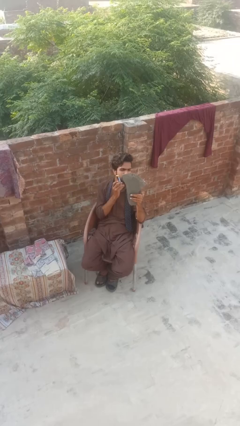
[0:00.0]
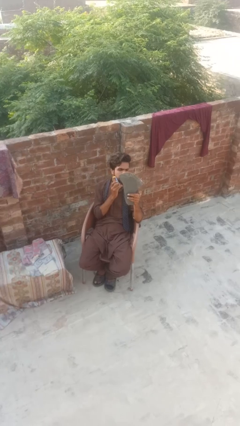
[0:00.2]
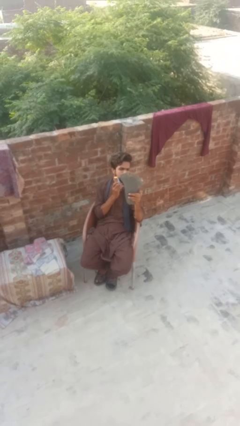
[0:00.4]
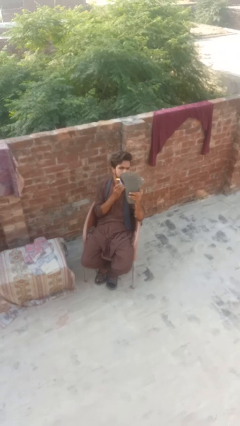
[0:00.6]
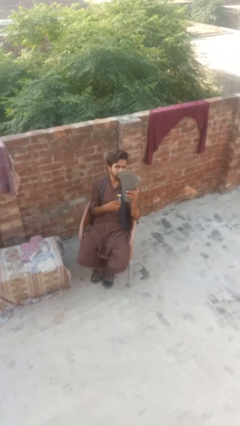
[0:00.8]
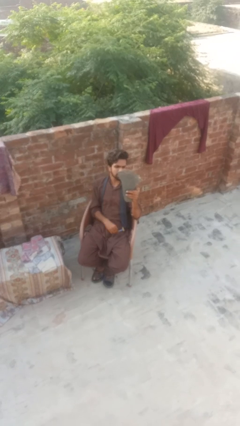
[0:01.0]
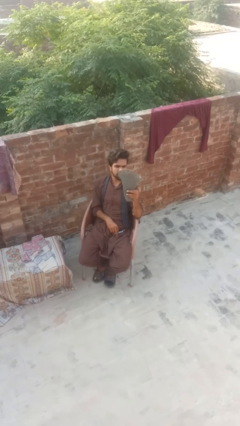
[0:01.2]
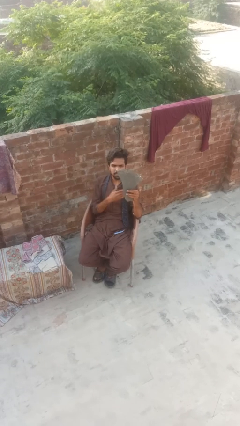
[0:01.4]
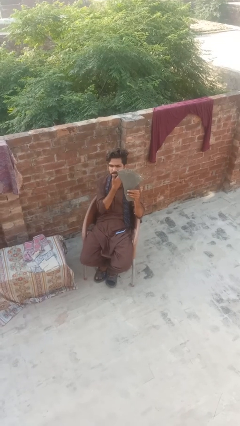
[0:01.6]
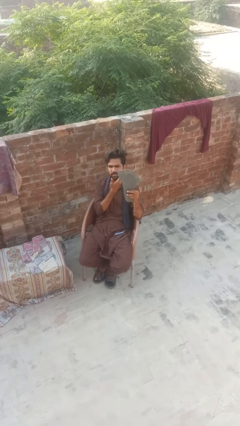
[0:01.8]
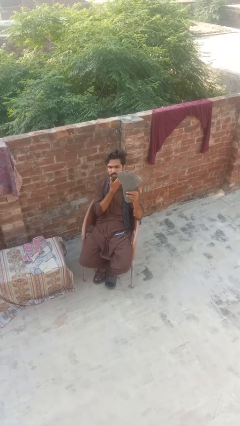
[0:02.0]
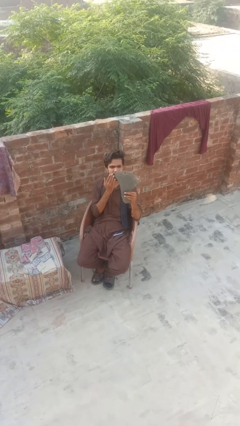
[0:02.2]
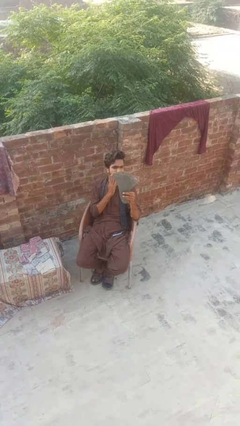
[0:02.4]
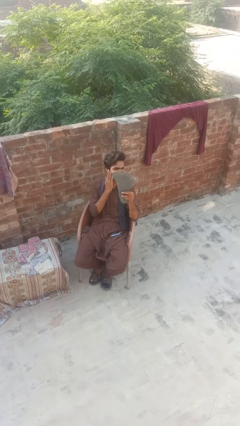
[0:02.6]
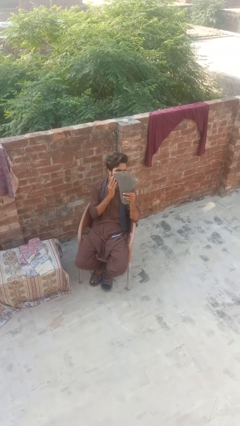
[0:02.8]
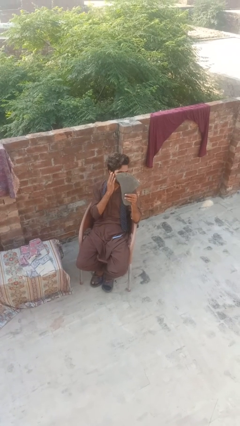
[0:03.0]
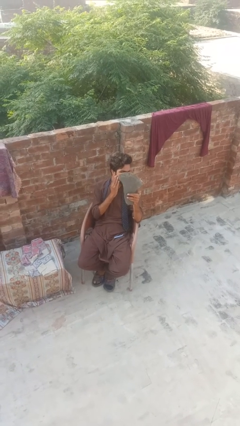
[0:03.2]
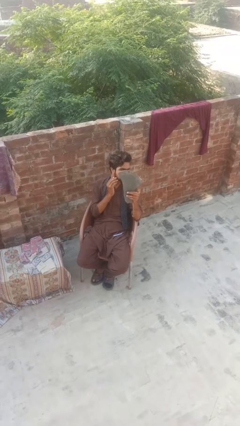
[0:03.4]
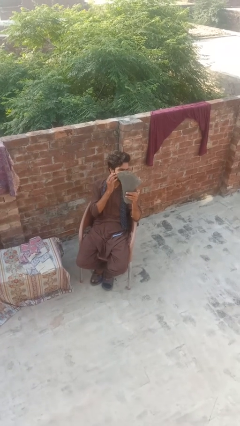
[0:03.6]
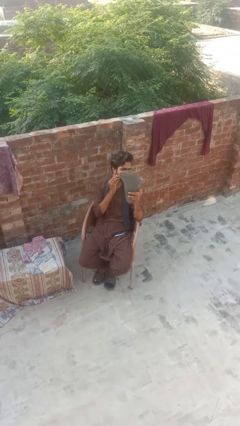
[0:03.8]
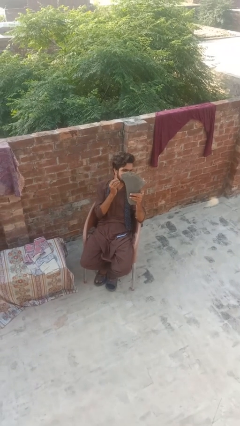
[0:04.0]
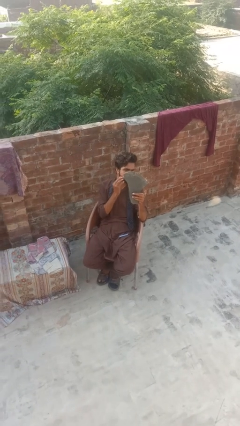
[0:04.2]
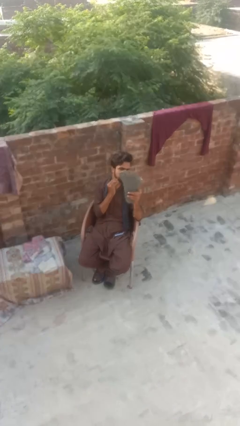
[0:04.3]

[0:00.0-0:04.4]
person applies shaving cream

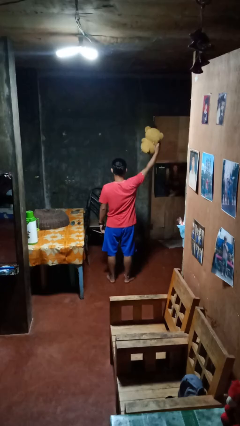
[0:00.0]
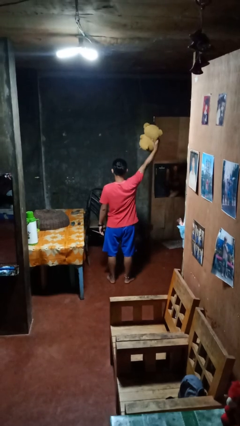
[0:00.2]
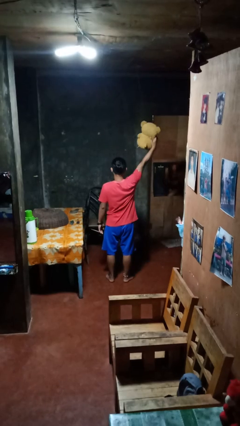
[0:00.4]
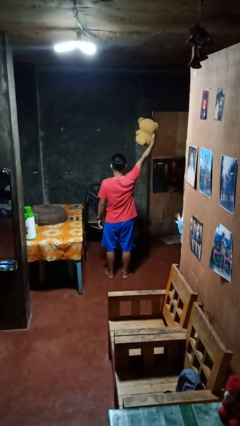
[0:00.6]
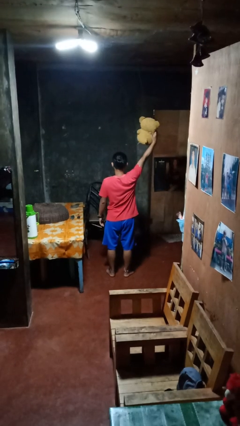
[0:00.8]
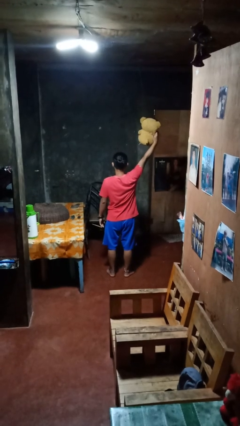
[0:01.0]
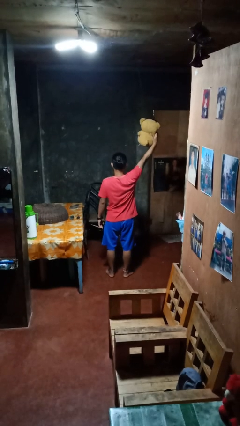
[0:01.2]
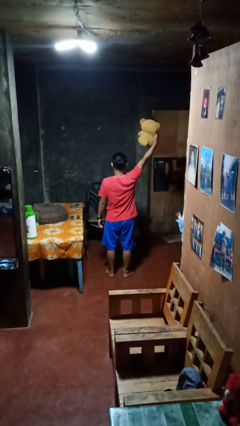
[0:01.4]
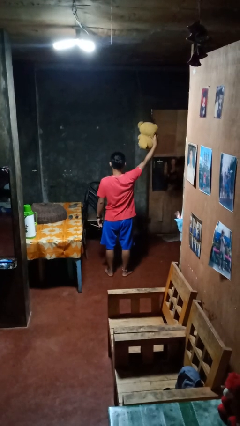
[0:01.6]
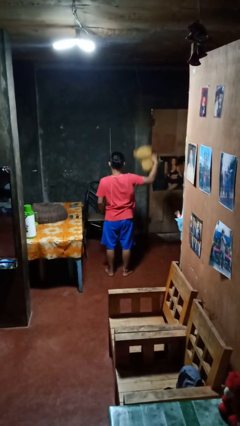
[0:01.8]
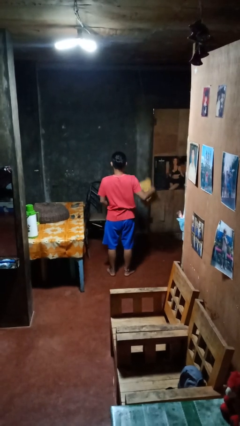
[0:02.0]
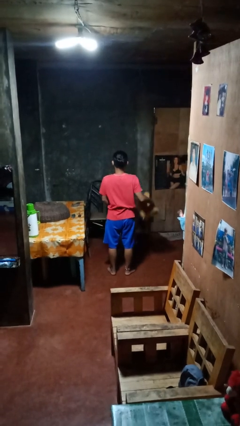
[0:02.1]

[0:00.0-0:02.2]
person holds object above head

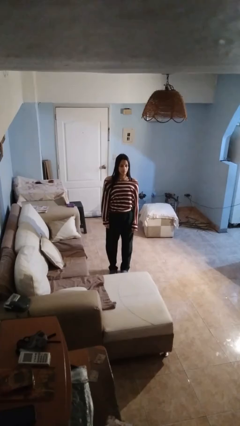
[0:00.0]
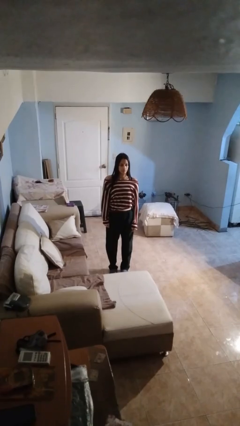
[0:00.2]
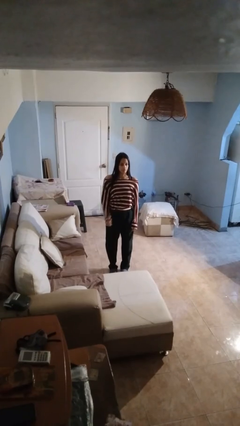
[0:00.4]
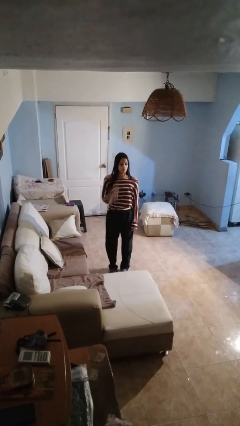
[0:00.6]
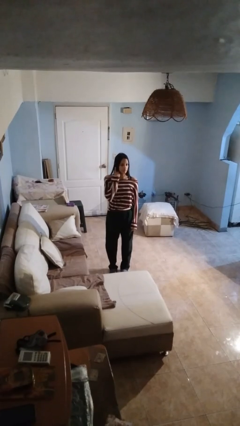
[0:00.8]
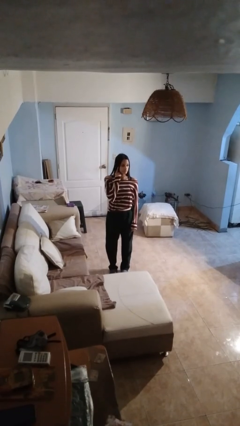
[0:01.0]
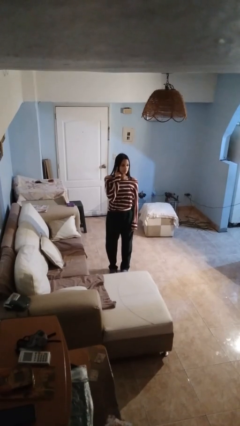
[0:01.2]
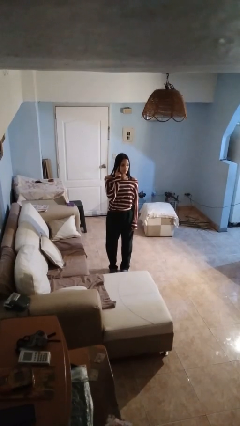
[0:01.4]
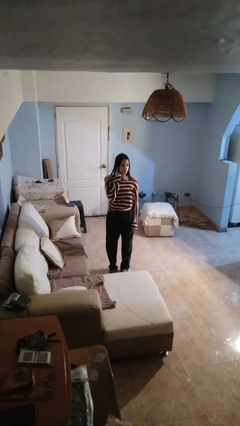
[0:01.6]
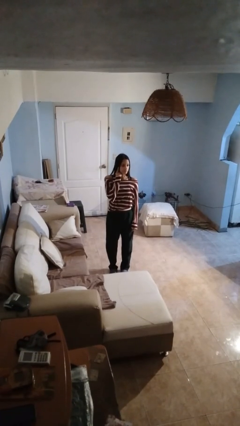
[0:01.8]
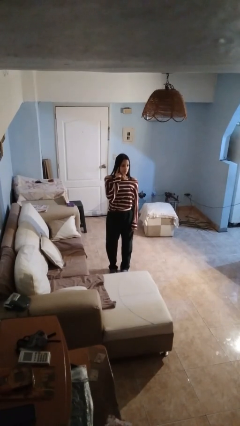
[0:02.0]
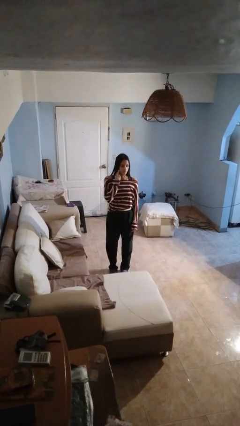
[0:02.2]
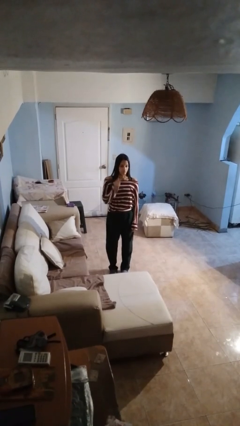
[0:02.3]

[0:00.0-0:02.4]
person gestures listen closely

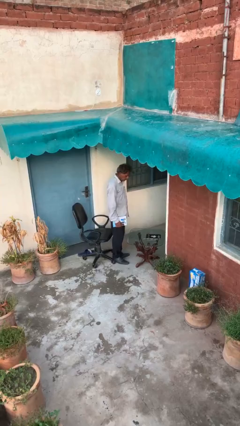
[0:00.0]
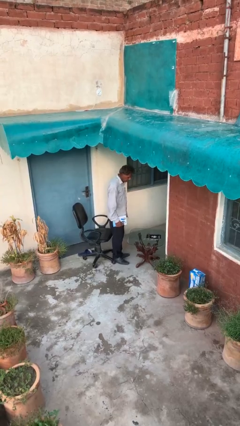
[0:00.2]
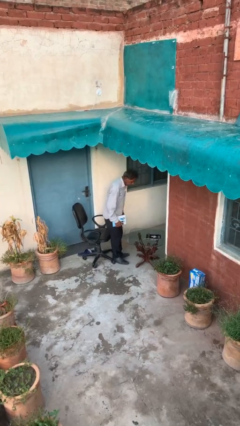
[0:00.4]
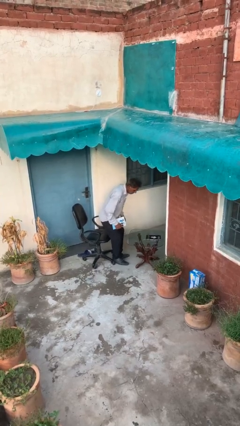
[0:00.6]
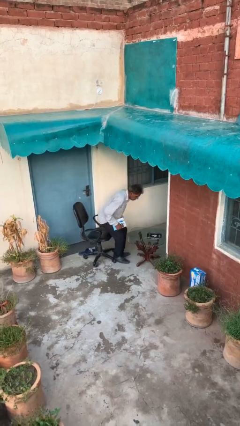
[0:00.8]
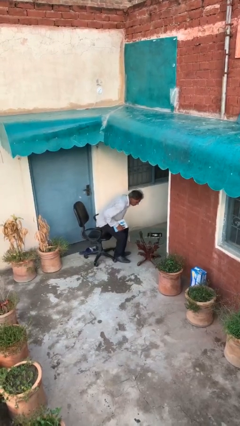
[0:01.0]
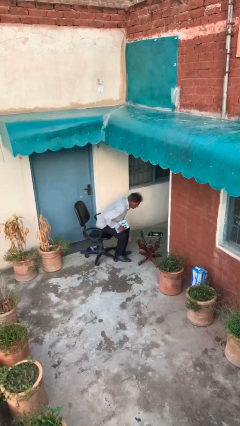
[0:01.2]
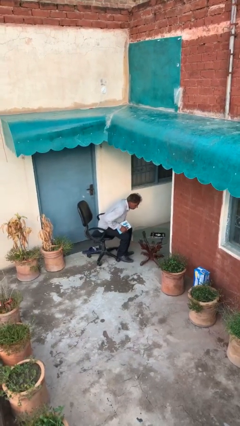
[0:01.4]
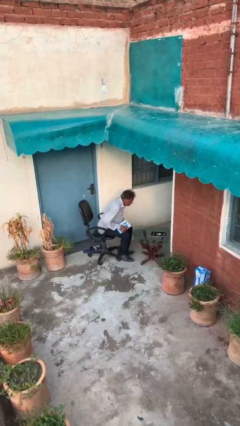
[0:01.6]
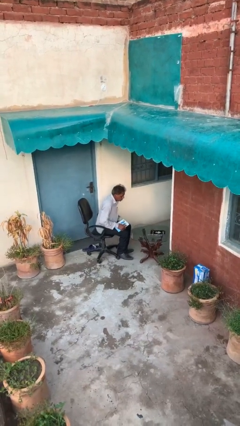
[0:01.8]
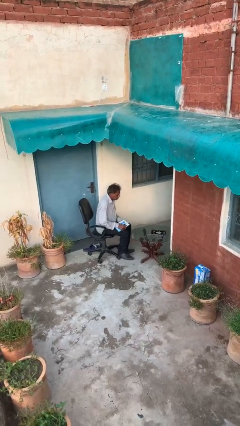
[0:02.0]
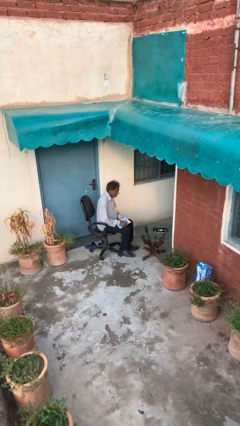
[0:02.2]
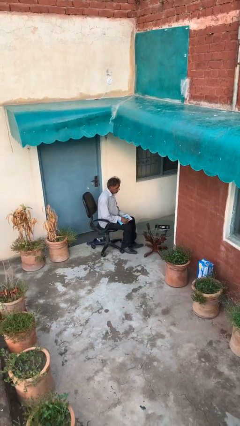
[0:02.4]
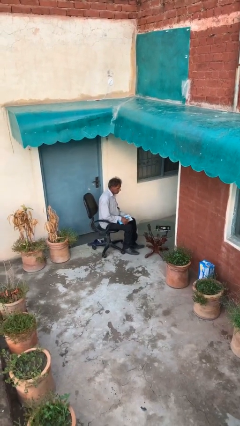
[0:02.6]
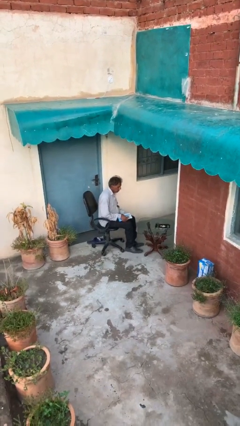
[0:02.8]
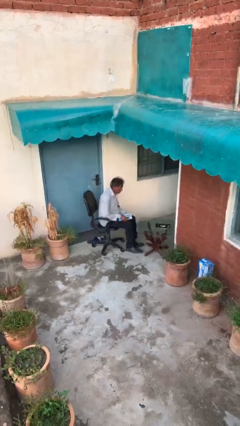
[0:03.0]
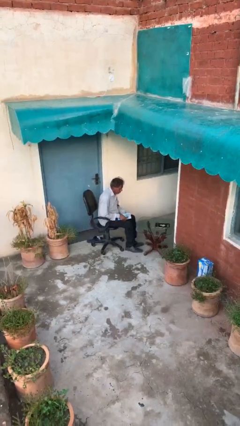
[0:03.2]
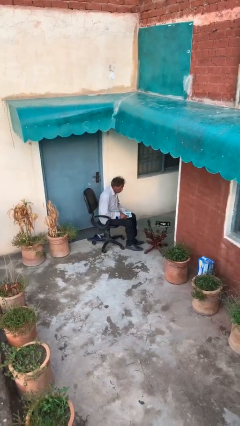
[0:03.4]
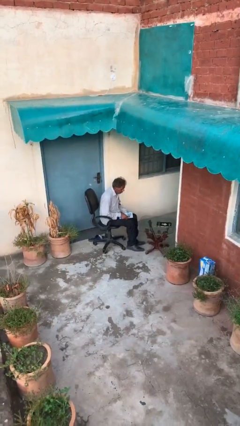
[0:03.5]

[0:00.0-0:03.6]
person sits down

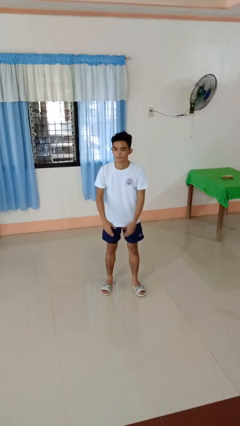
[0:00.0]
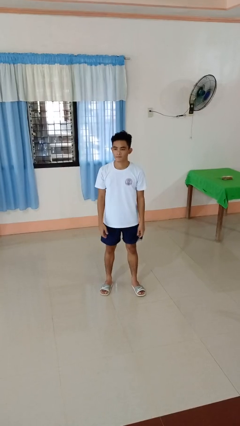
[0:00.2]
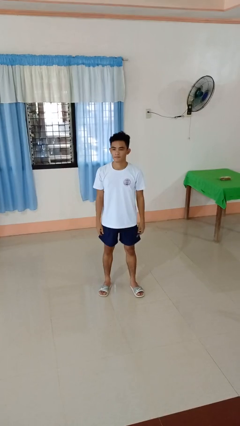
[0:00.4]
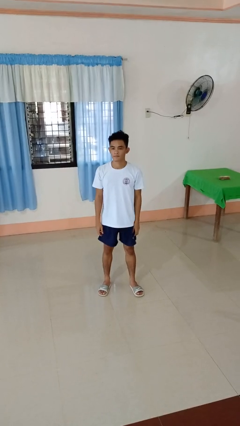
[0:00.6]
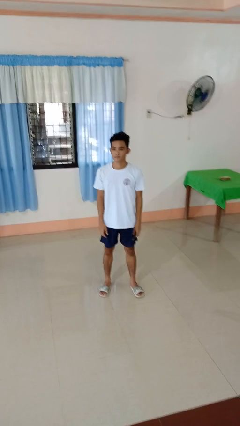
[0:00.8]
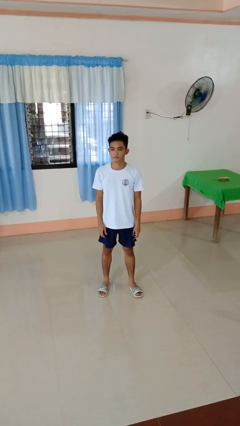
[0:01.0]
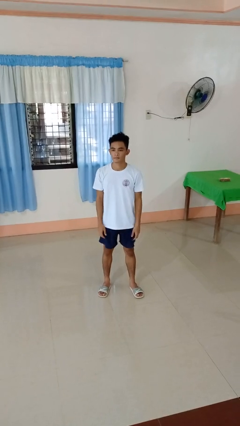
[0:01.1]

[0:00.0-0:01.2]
person stands up

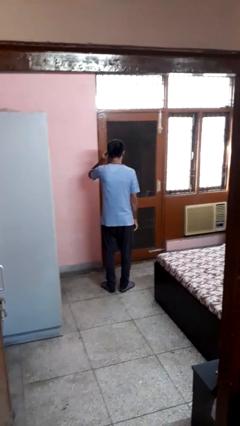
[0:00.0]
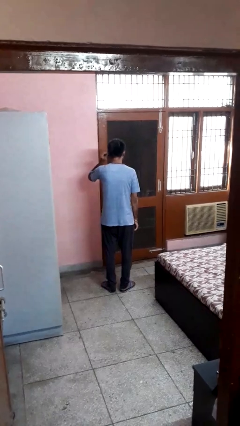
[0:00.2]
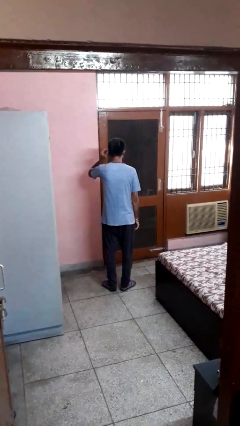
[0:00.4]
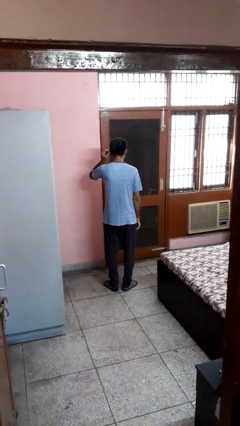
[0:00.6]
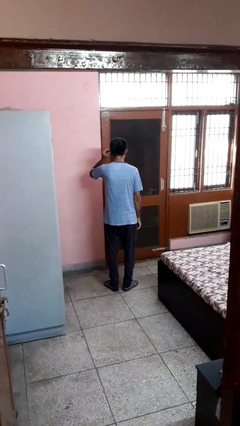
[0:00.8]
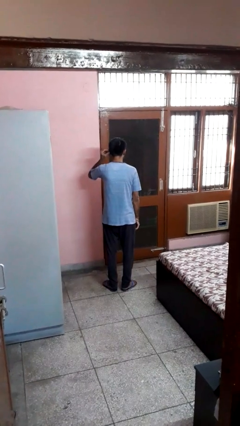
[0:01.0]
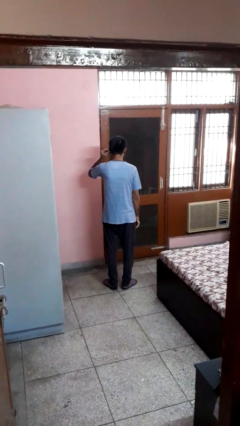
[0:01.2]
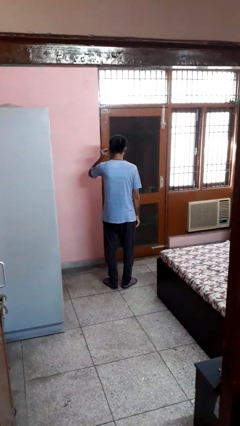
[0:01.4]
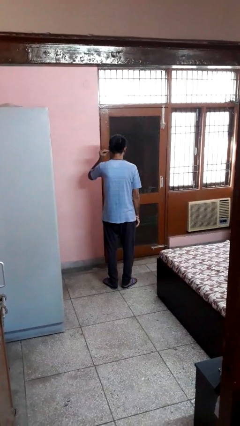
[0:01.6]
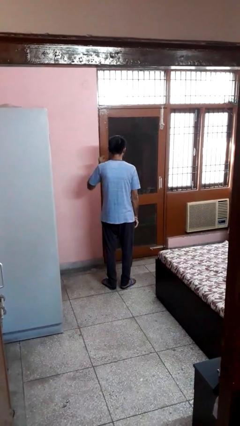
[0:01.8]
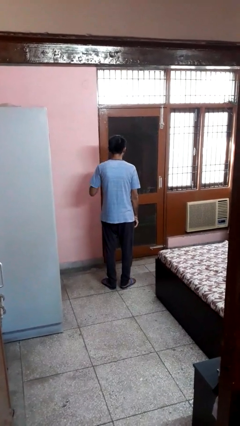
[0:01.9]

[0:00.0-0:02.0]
person touches earlobe

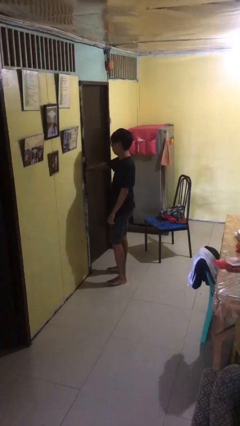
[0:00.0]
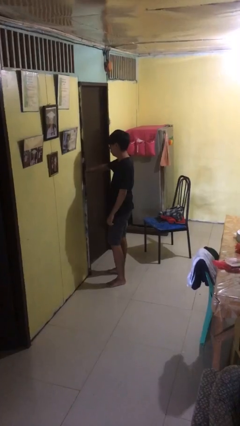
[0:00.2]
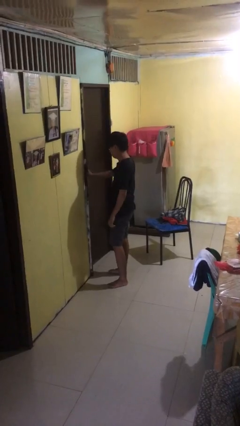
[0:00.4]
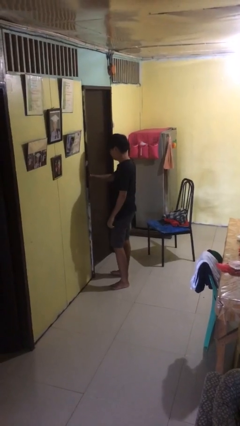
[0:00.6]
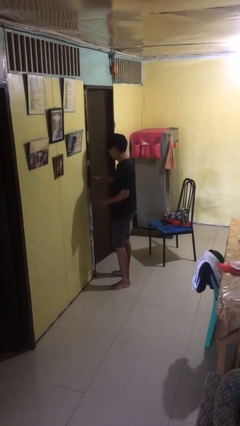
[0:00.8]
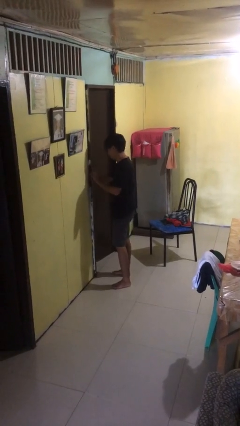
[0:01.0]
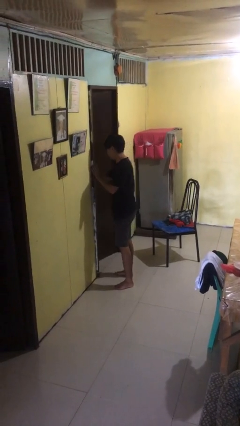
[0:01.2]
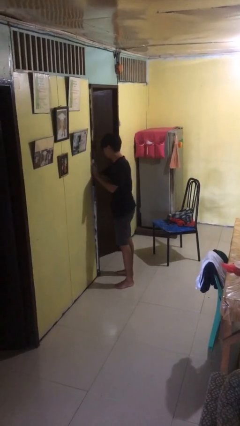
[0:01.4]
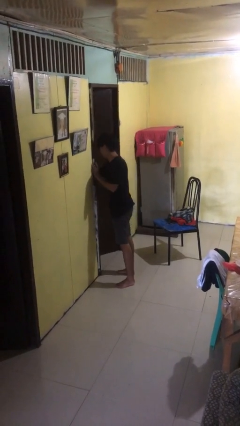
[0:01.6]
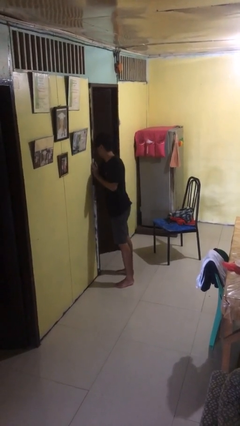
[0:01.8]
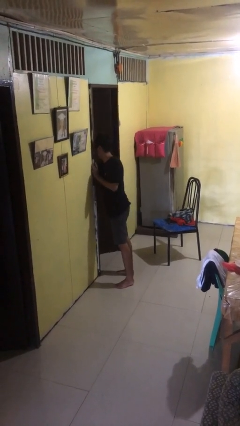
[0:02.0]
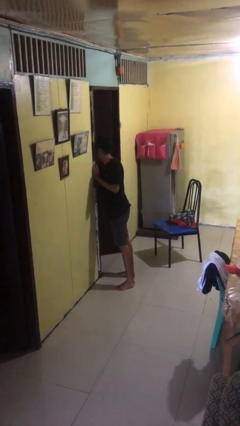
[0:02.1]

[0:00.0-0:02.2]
person opens facility door
